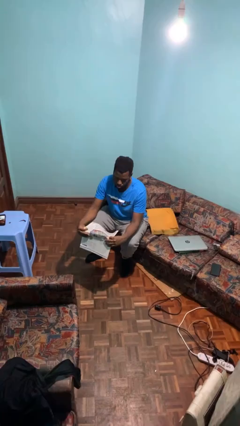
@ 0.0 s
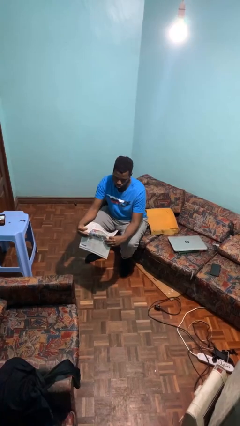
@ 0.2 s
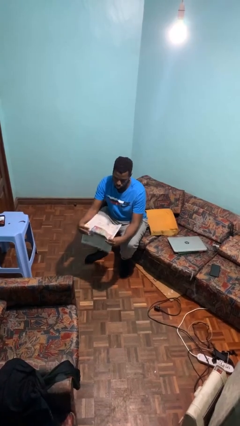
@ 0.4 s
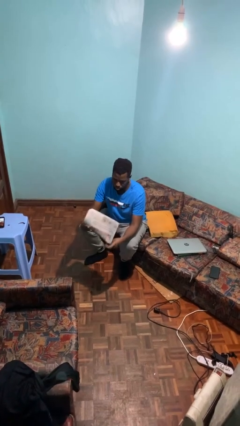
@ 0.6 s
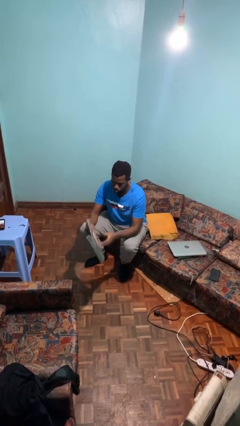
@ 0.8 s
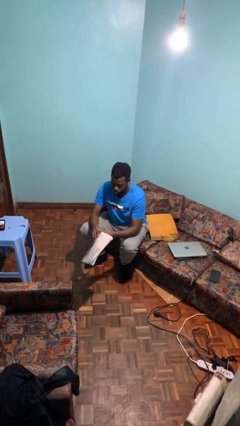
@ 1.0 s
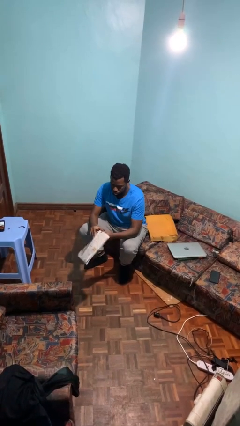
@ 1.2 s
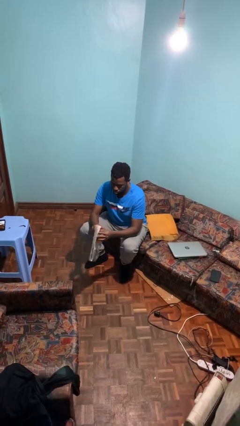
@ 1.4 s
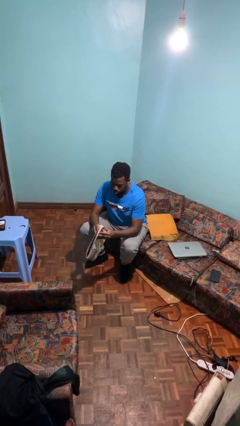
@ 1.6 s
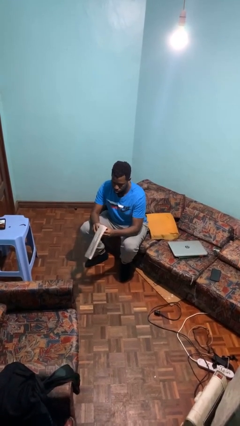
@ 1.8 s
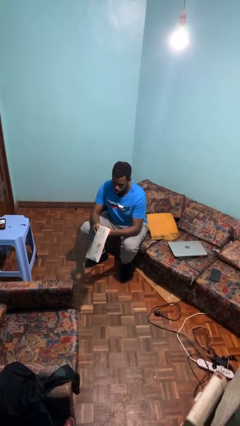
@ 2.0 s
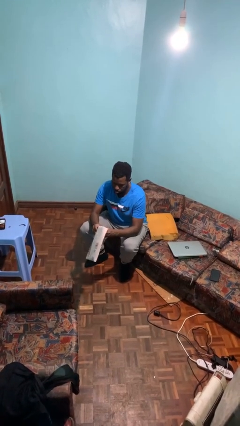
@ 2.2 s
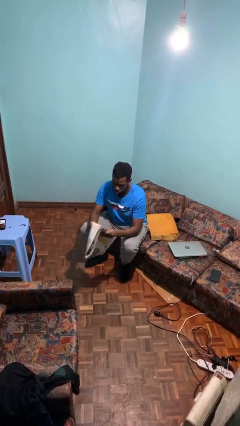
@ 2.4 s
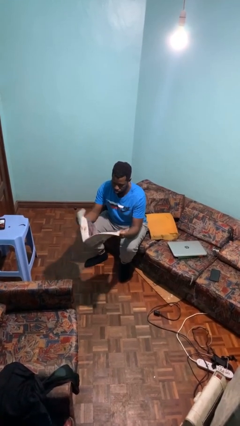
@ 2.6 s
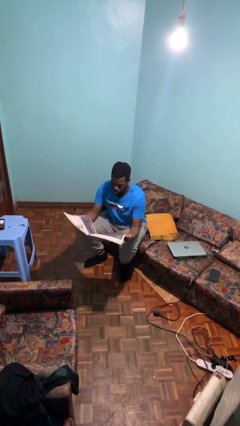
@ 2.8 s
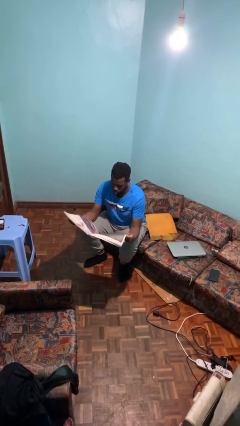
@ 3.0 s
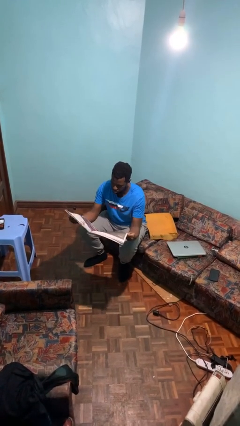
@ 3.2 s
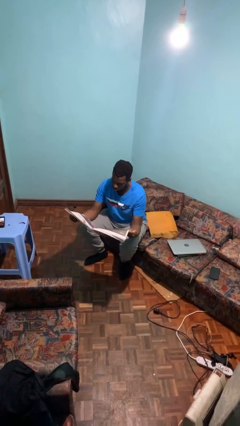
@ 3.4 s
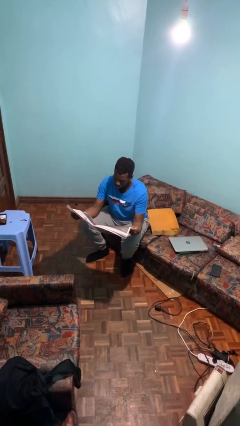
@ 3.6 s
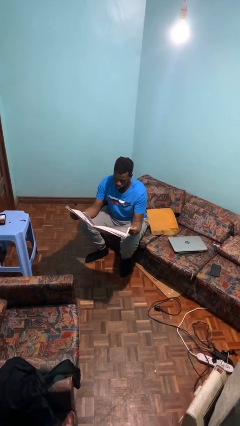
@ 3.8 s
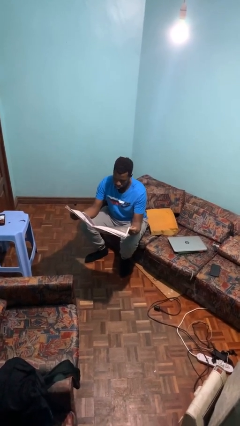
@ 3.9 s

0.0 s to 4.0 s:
person reads newspaper

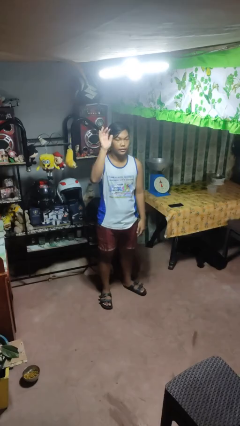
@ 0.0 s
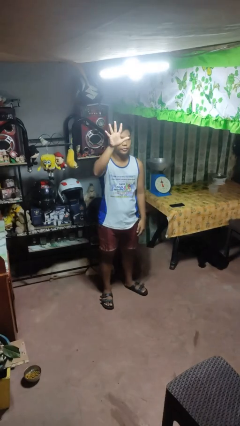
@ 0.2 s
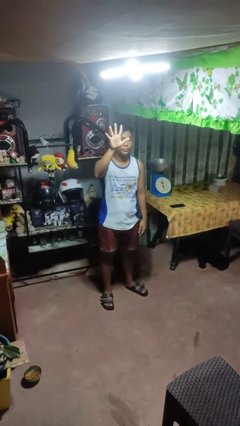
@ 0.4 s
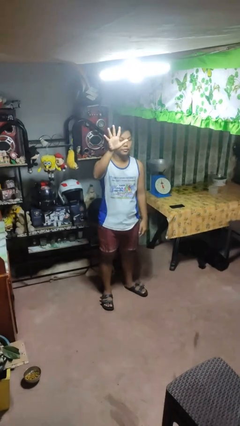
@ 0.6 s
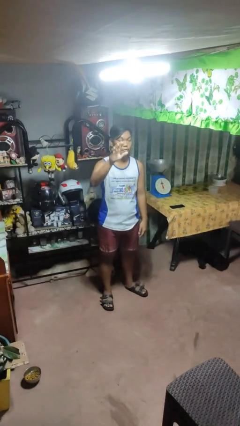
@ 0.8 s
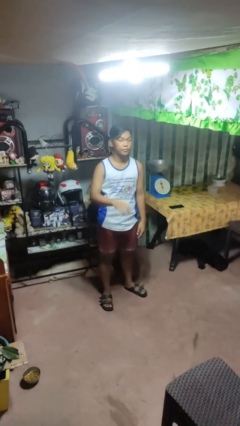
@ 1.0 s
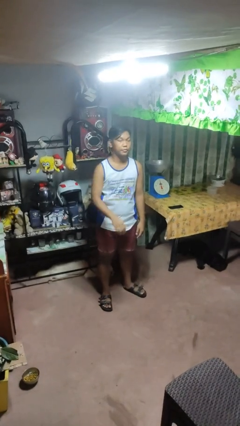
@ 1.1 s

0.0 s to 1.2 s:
person gestures number five

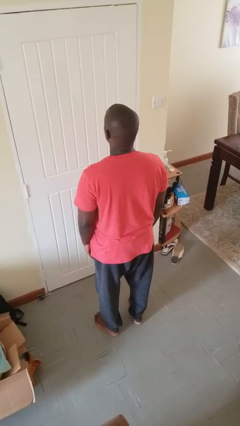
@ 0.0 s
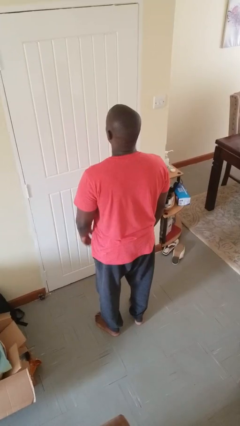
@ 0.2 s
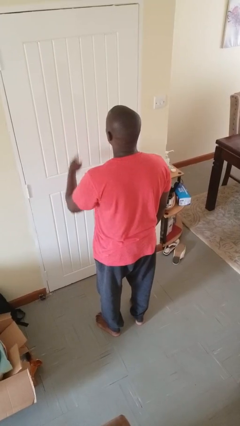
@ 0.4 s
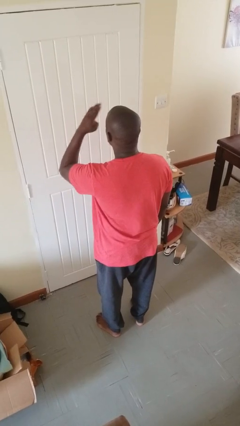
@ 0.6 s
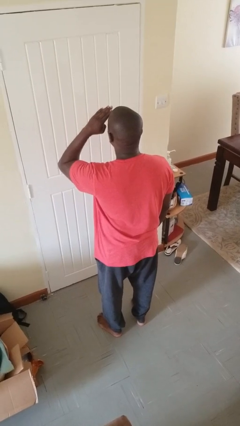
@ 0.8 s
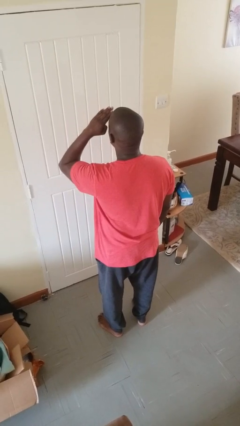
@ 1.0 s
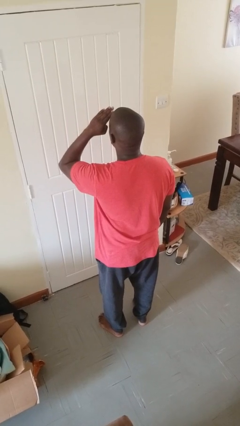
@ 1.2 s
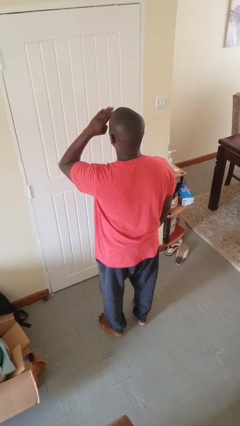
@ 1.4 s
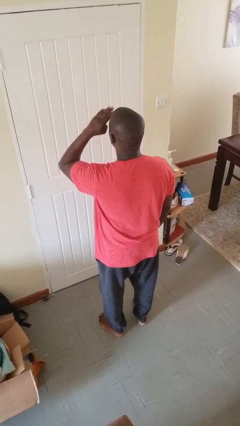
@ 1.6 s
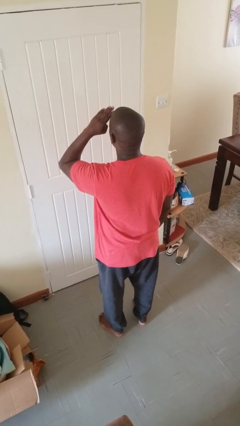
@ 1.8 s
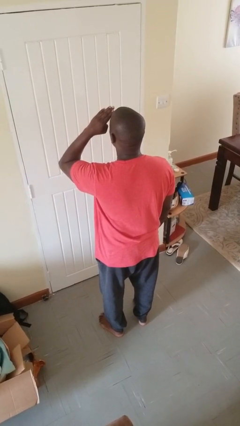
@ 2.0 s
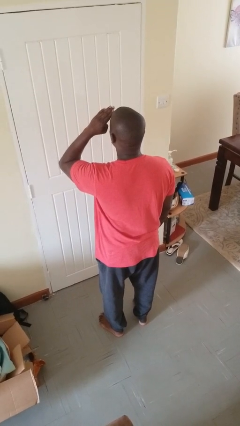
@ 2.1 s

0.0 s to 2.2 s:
person salutes

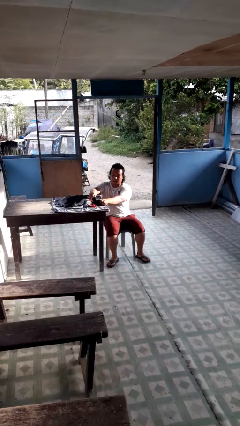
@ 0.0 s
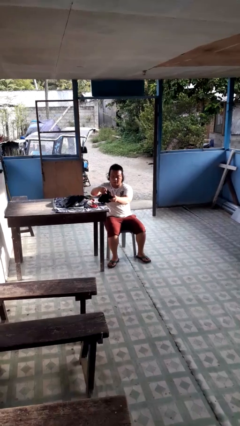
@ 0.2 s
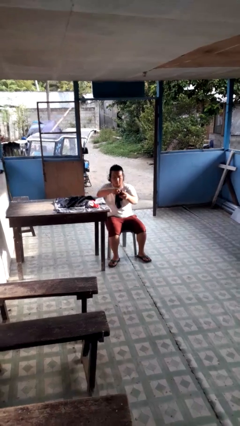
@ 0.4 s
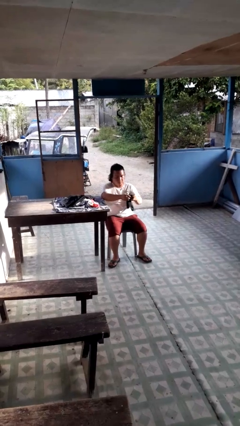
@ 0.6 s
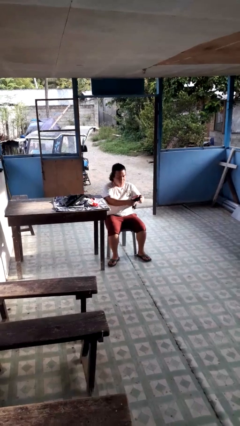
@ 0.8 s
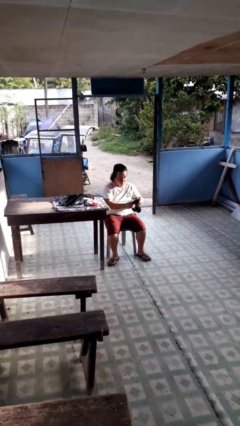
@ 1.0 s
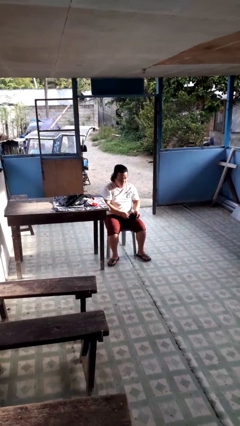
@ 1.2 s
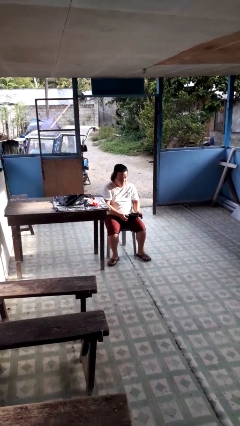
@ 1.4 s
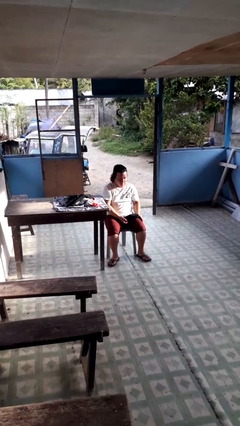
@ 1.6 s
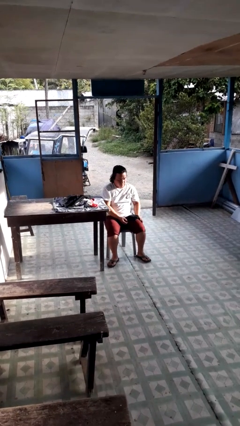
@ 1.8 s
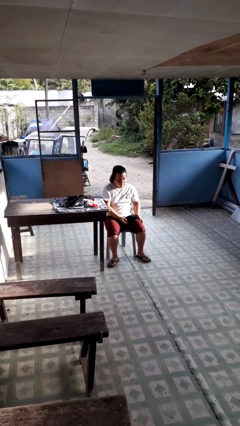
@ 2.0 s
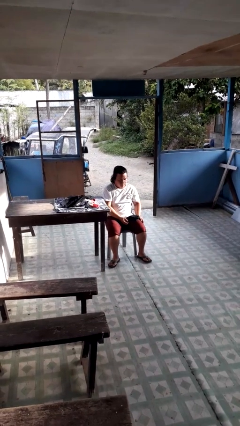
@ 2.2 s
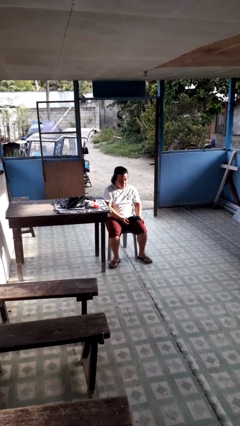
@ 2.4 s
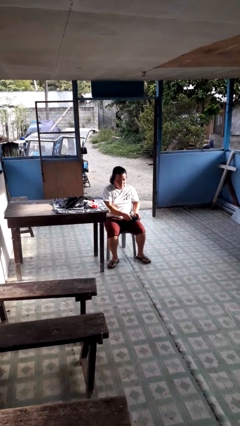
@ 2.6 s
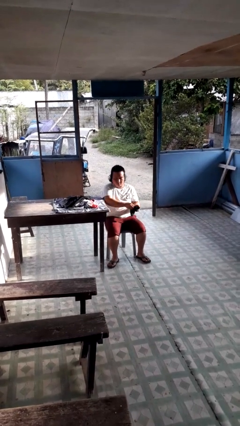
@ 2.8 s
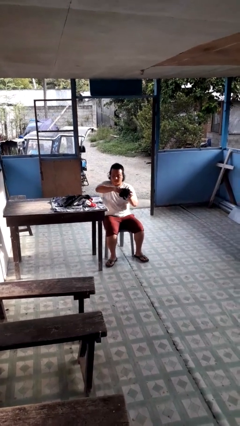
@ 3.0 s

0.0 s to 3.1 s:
person folds socks

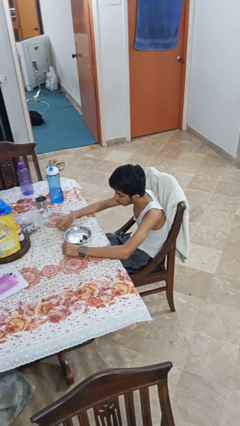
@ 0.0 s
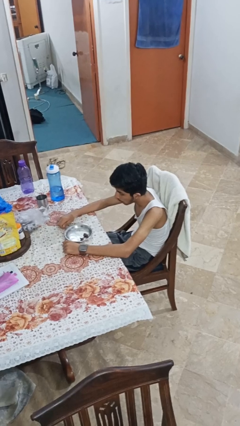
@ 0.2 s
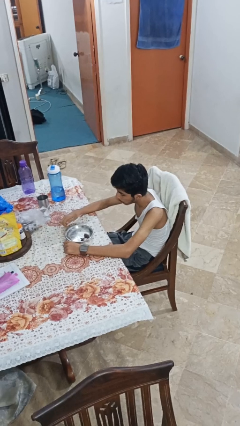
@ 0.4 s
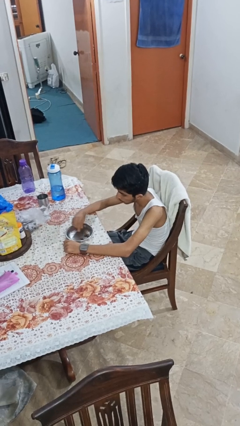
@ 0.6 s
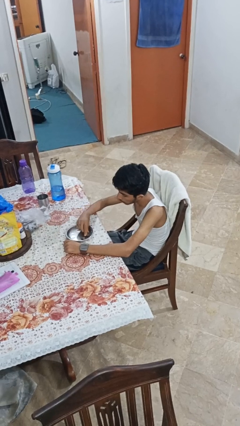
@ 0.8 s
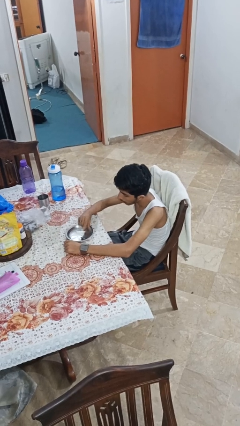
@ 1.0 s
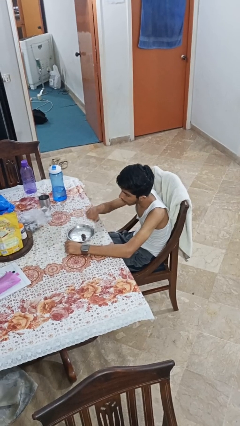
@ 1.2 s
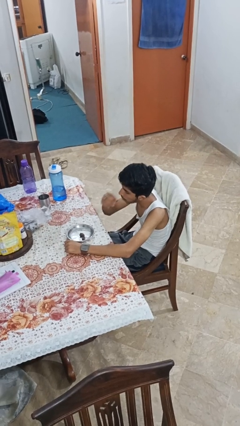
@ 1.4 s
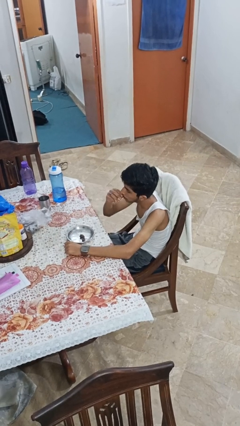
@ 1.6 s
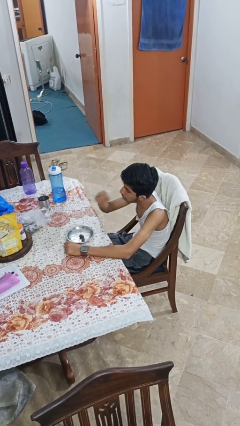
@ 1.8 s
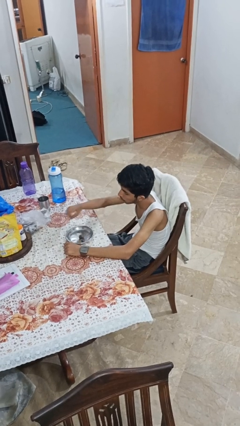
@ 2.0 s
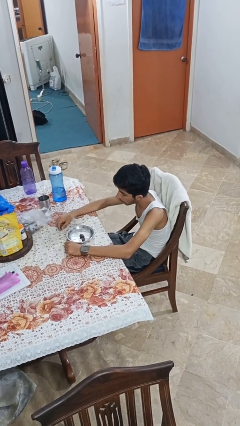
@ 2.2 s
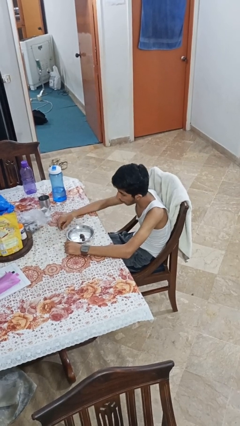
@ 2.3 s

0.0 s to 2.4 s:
person eats with hands

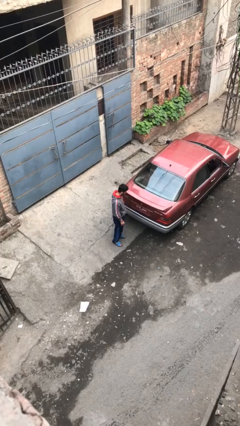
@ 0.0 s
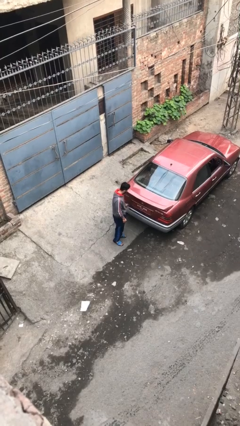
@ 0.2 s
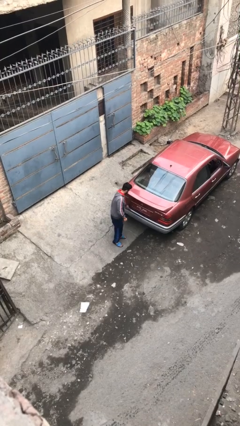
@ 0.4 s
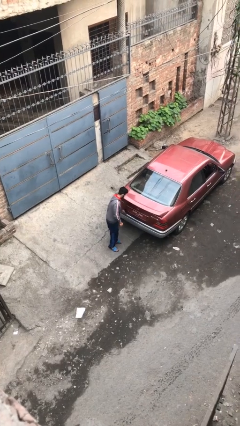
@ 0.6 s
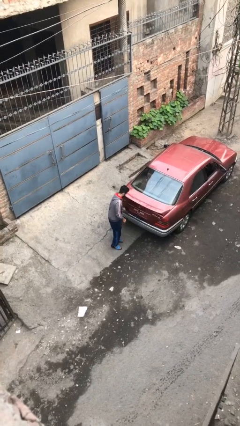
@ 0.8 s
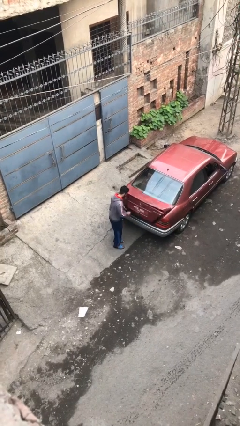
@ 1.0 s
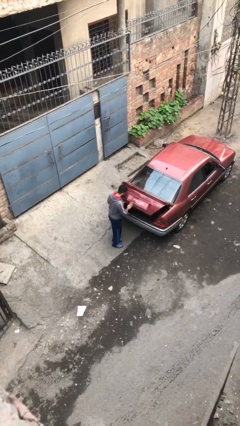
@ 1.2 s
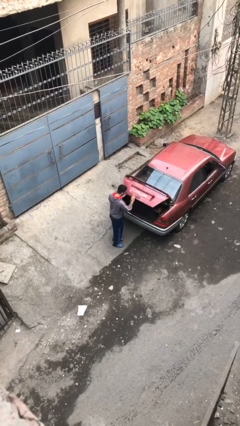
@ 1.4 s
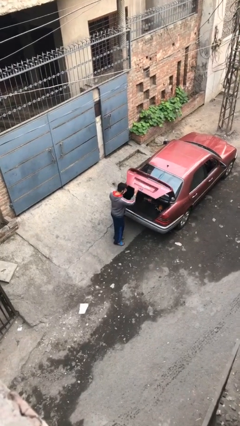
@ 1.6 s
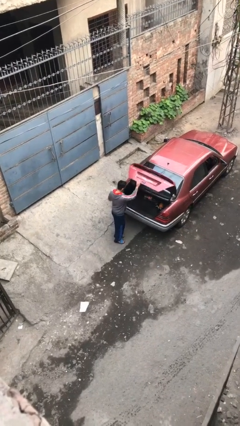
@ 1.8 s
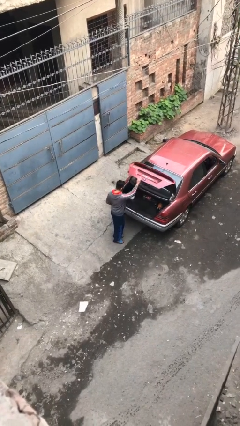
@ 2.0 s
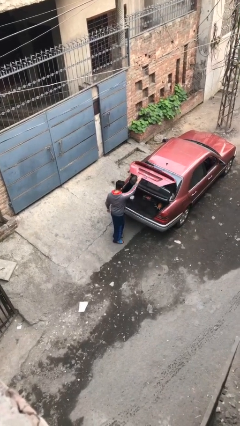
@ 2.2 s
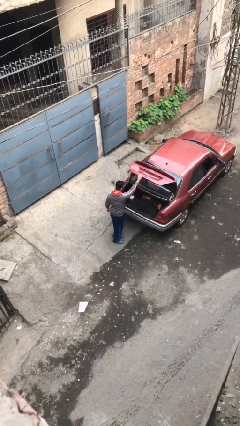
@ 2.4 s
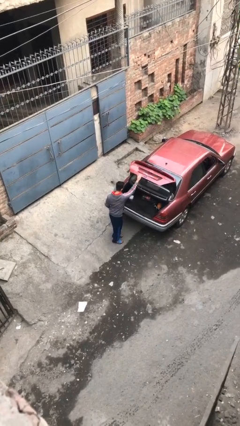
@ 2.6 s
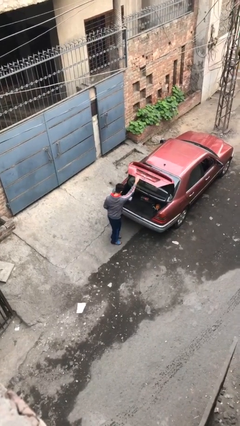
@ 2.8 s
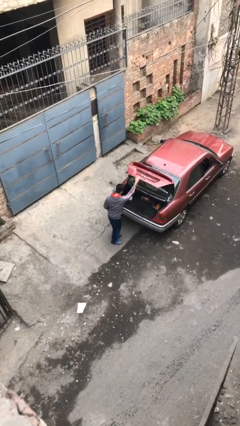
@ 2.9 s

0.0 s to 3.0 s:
person opens car trunk

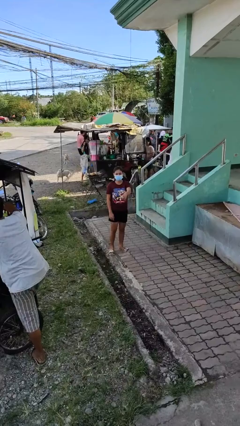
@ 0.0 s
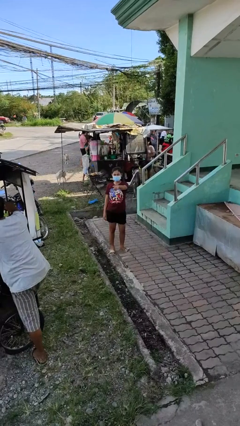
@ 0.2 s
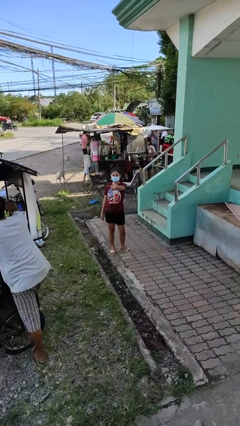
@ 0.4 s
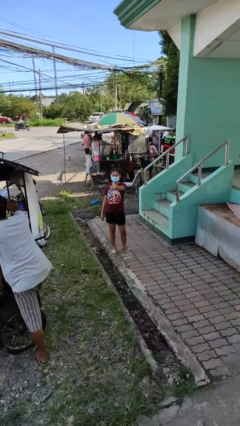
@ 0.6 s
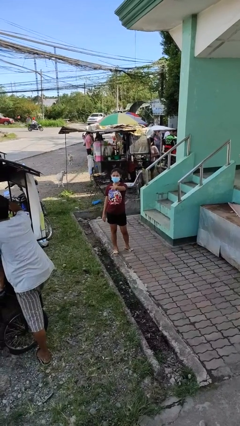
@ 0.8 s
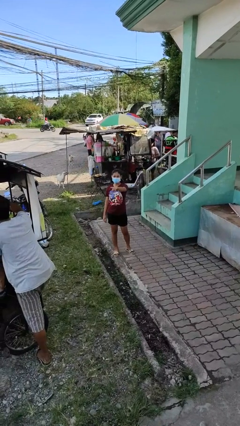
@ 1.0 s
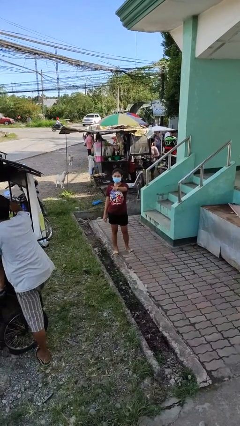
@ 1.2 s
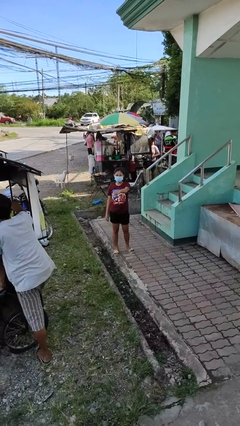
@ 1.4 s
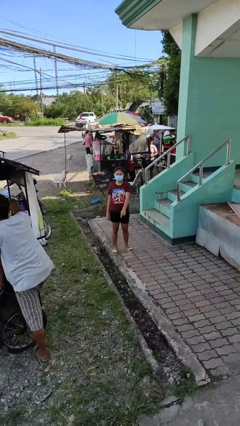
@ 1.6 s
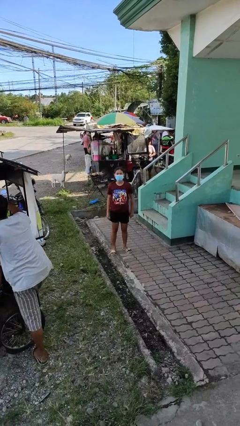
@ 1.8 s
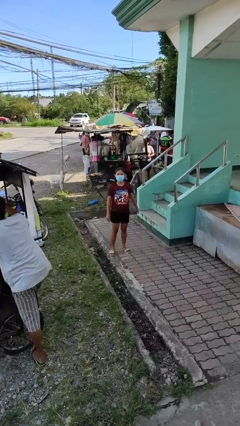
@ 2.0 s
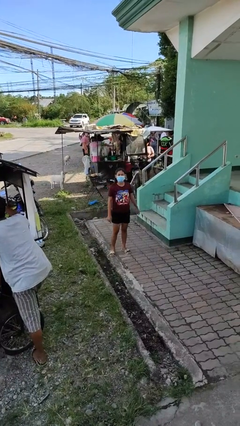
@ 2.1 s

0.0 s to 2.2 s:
person points at person
